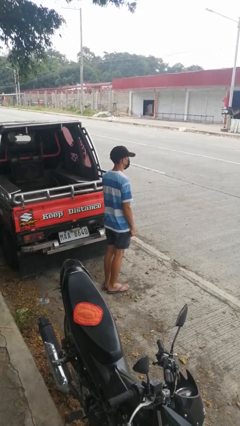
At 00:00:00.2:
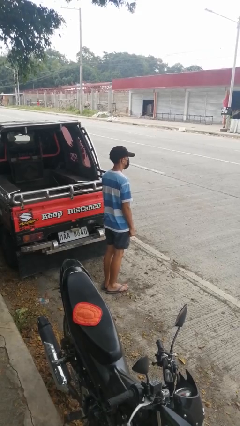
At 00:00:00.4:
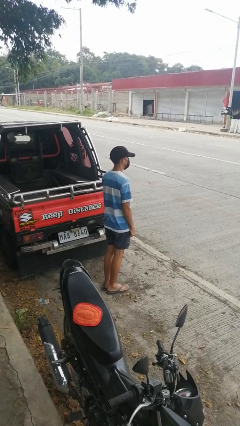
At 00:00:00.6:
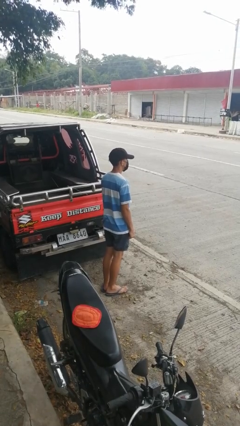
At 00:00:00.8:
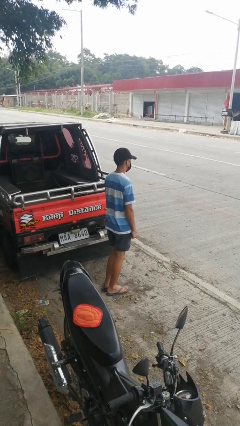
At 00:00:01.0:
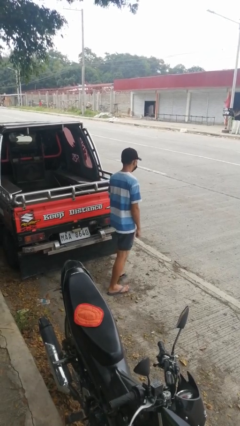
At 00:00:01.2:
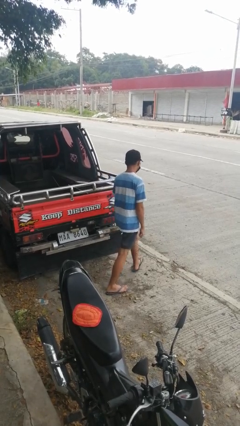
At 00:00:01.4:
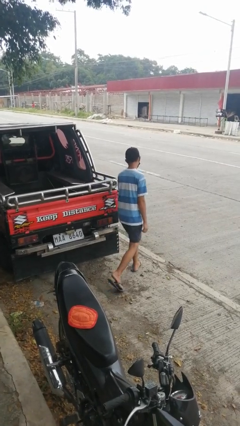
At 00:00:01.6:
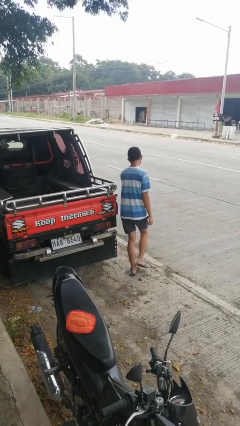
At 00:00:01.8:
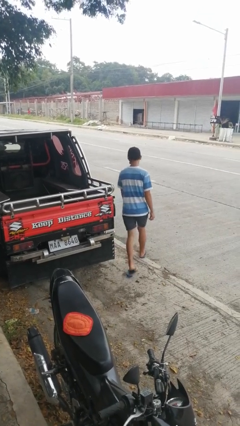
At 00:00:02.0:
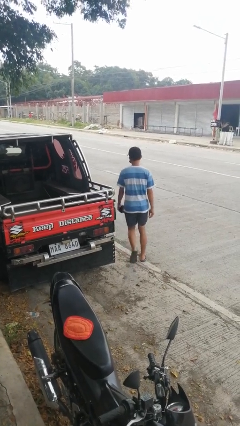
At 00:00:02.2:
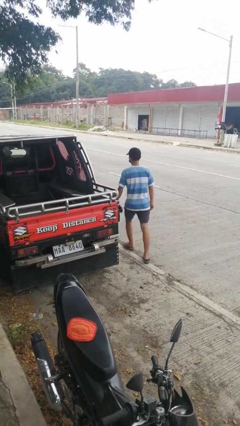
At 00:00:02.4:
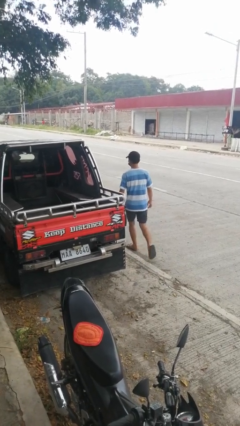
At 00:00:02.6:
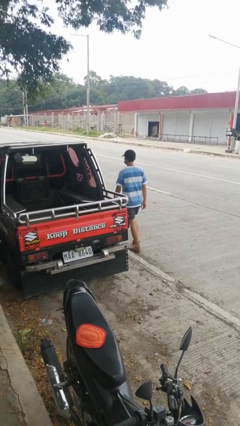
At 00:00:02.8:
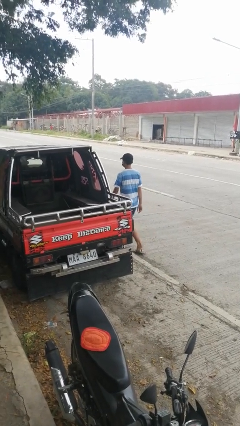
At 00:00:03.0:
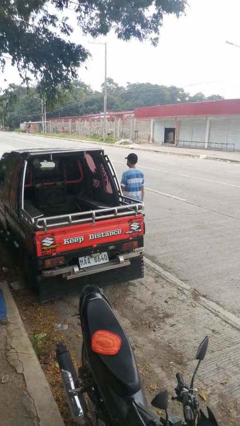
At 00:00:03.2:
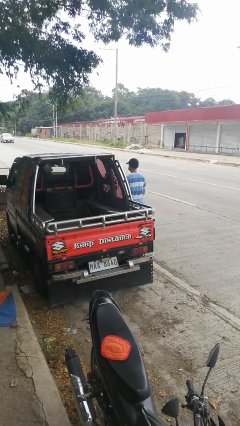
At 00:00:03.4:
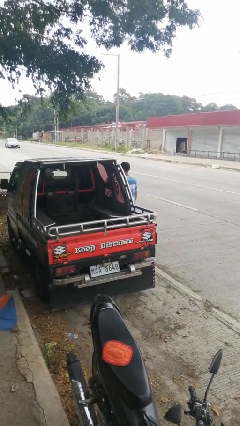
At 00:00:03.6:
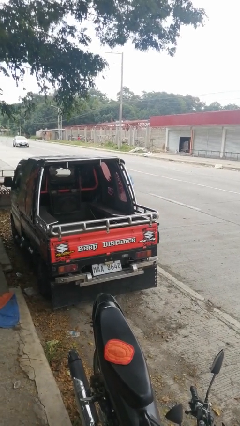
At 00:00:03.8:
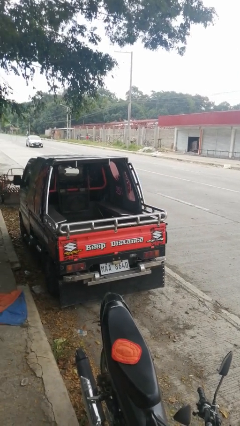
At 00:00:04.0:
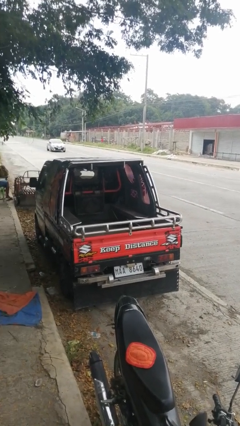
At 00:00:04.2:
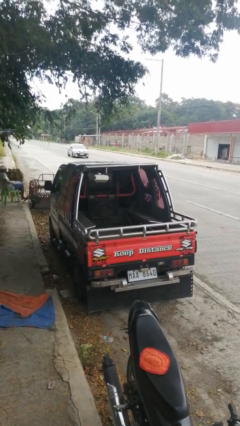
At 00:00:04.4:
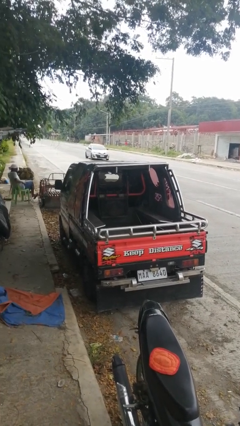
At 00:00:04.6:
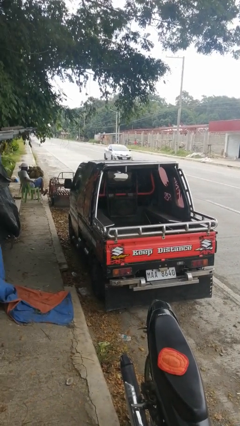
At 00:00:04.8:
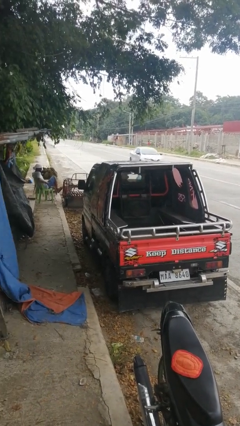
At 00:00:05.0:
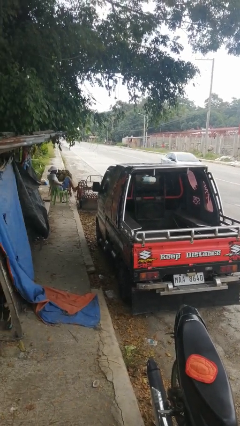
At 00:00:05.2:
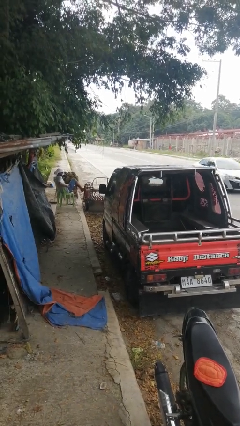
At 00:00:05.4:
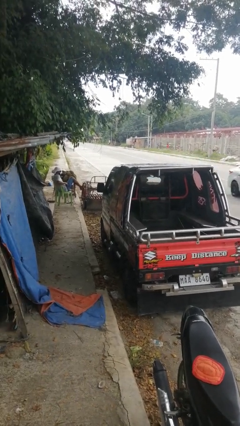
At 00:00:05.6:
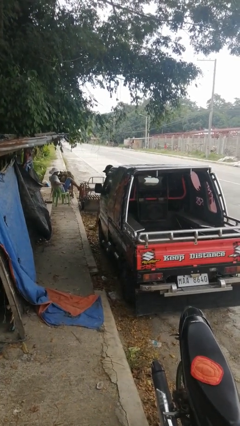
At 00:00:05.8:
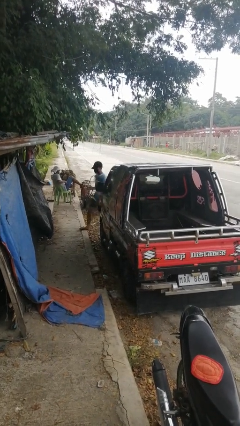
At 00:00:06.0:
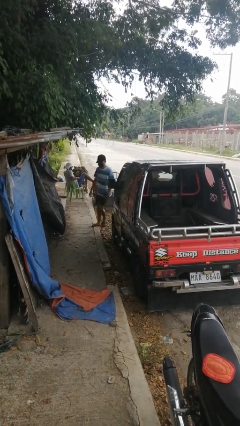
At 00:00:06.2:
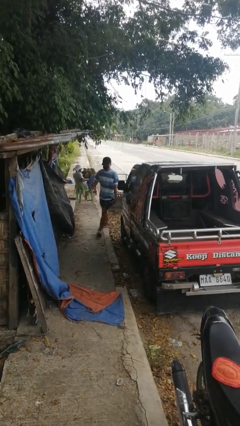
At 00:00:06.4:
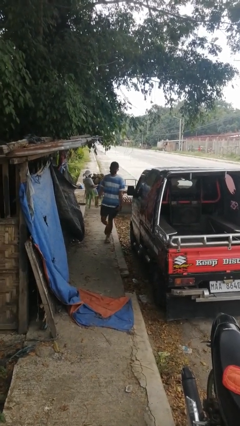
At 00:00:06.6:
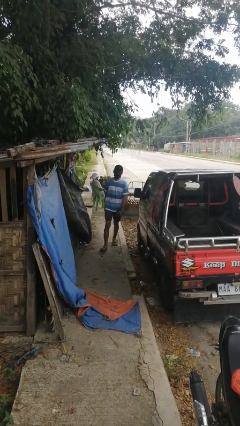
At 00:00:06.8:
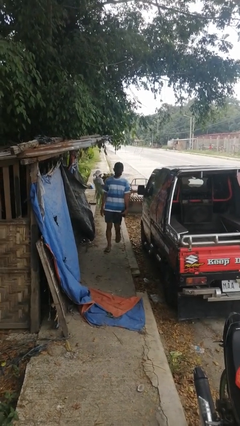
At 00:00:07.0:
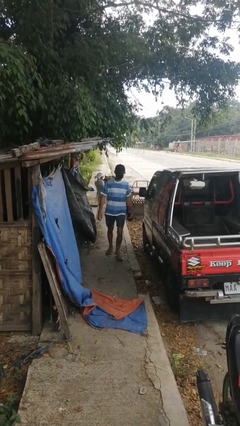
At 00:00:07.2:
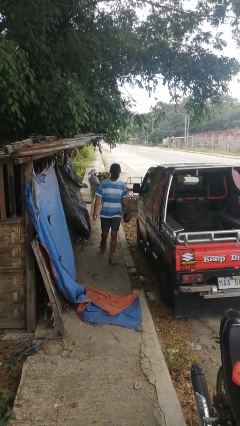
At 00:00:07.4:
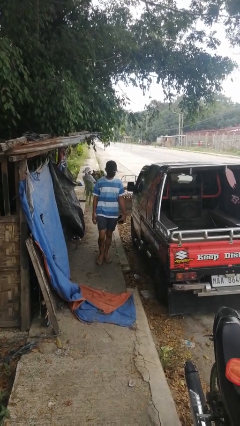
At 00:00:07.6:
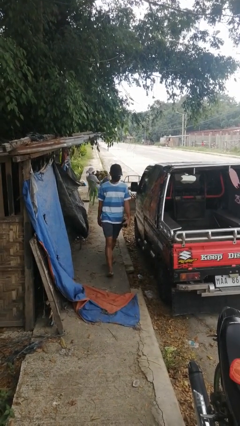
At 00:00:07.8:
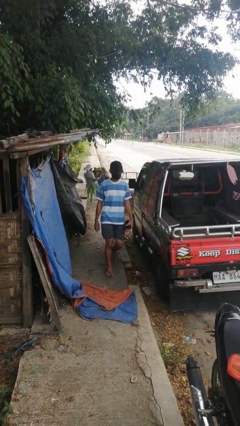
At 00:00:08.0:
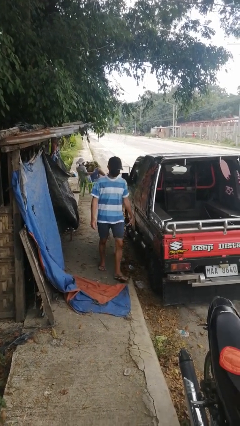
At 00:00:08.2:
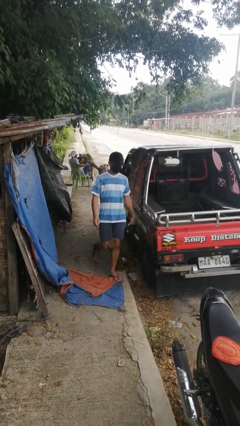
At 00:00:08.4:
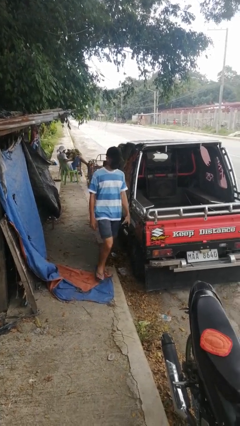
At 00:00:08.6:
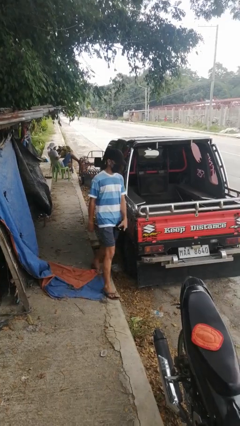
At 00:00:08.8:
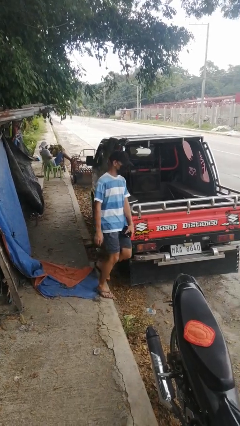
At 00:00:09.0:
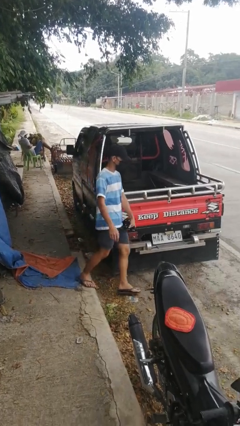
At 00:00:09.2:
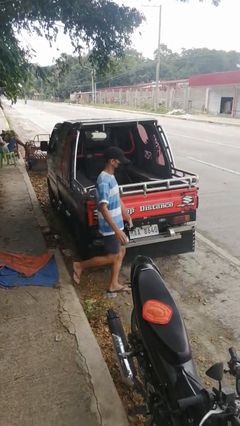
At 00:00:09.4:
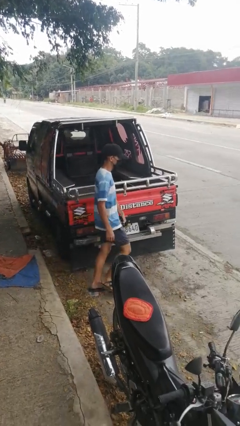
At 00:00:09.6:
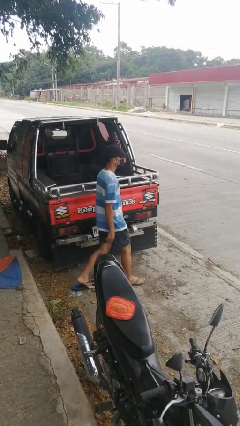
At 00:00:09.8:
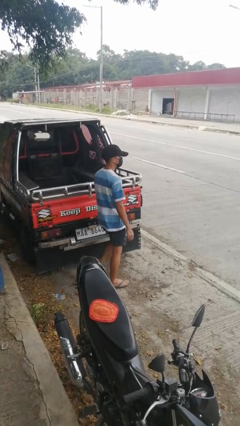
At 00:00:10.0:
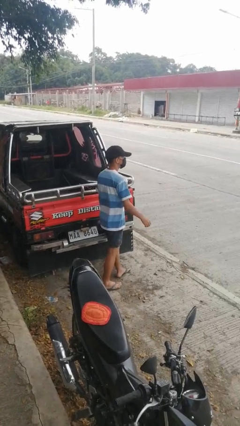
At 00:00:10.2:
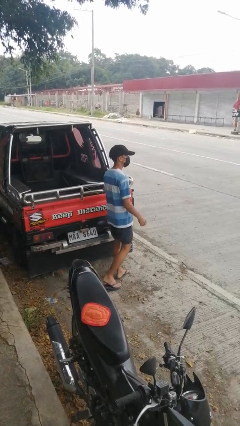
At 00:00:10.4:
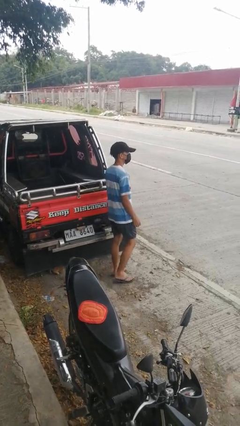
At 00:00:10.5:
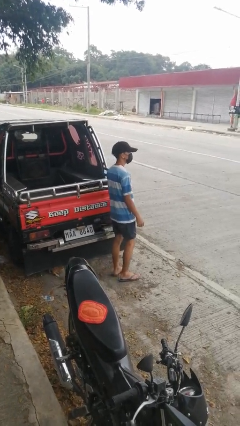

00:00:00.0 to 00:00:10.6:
person walks around car

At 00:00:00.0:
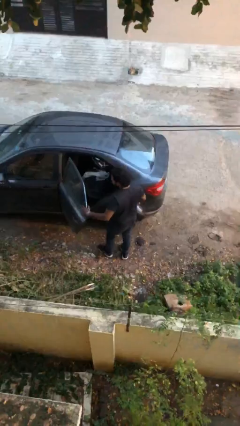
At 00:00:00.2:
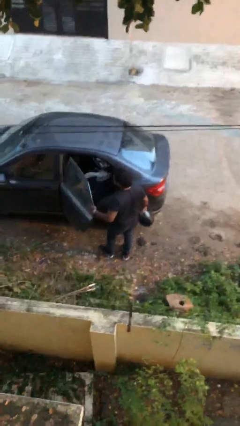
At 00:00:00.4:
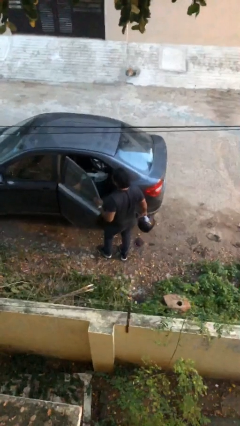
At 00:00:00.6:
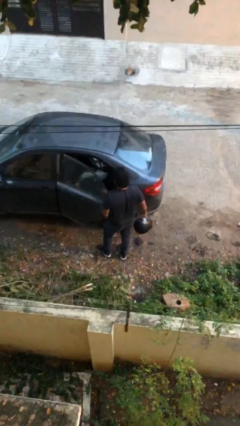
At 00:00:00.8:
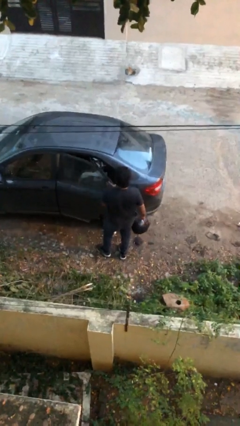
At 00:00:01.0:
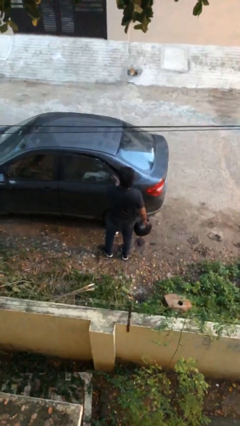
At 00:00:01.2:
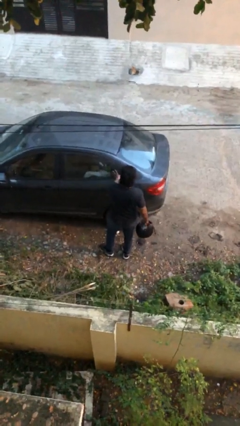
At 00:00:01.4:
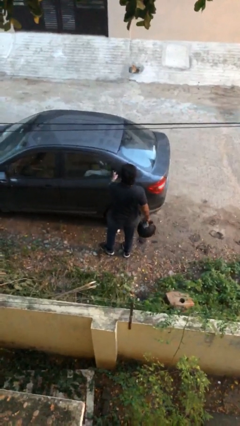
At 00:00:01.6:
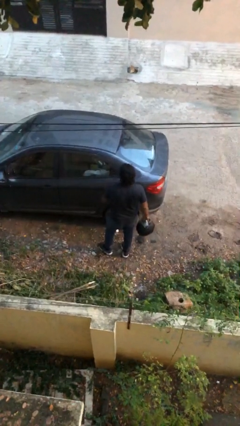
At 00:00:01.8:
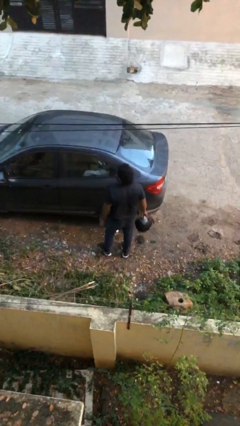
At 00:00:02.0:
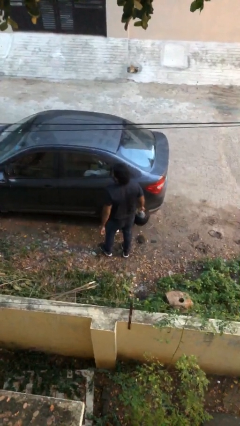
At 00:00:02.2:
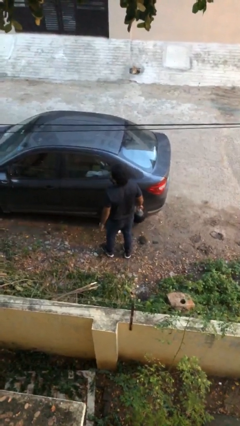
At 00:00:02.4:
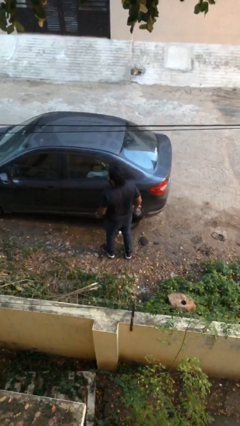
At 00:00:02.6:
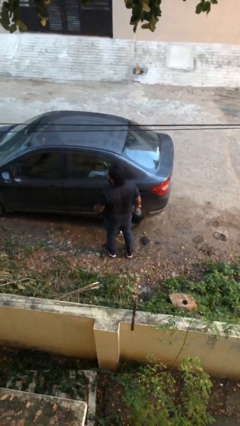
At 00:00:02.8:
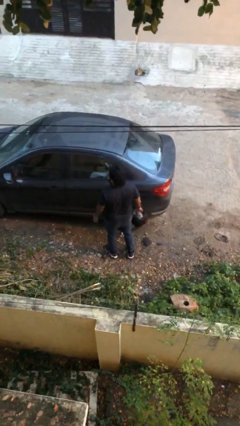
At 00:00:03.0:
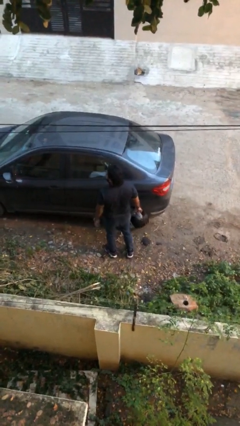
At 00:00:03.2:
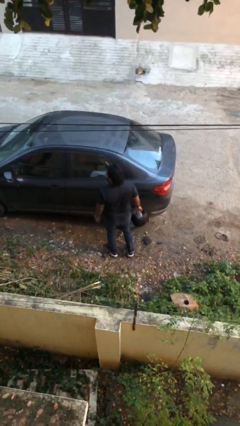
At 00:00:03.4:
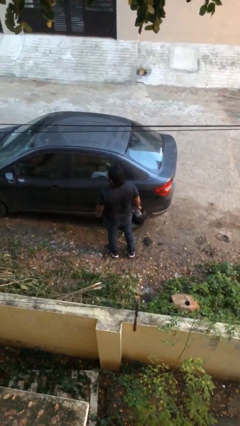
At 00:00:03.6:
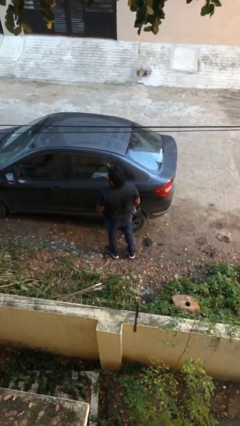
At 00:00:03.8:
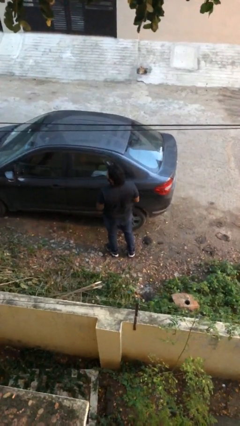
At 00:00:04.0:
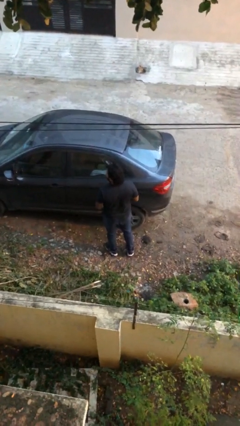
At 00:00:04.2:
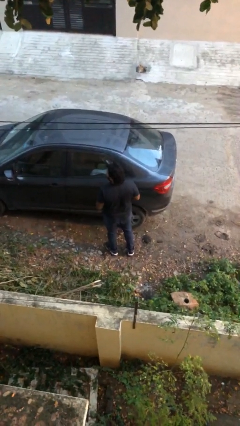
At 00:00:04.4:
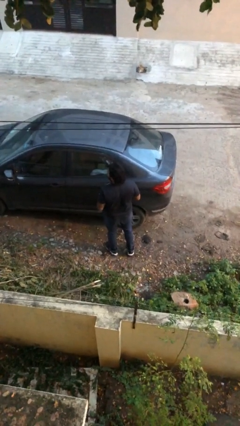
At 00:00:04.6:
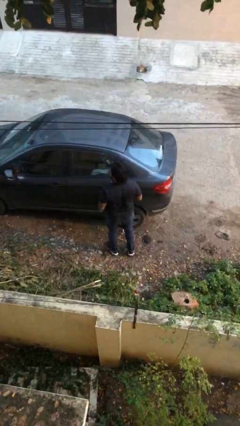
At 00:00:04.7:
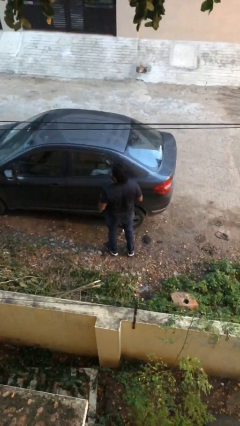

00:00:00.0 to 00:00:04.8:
person closes car door

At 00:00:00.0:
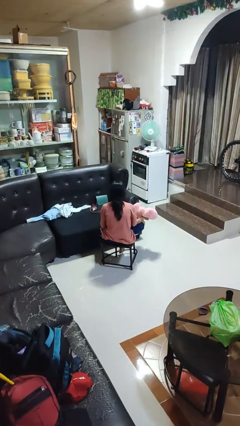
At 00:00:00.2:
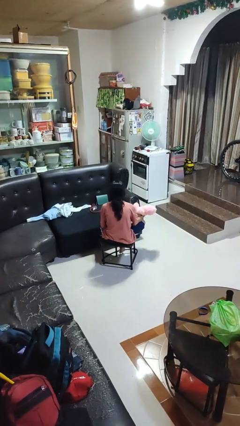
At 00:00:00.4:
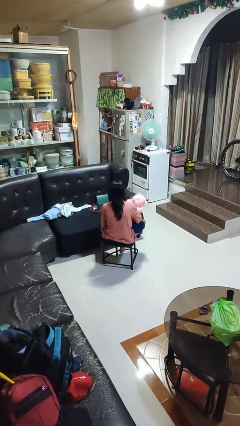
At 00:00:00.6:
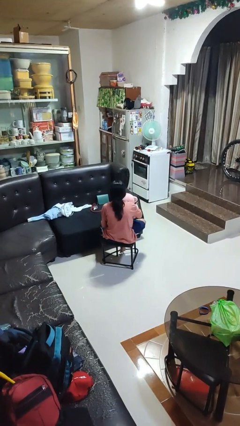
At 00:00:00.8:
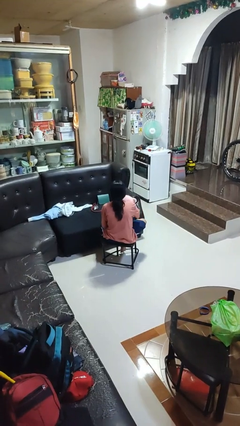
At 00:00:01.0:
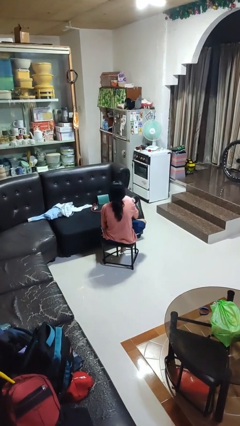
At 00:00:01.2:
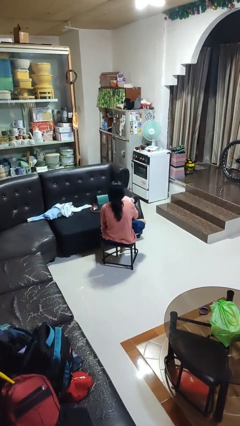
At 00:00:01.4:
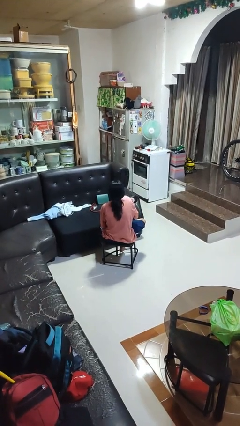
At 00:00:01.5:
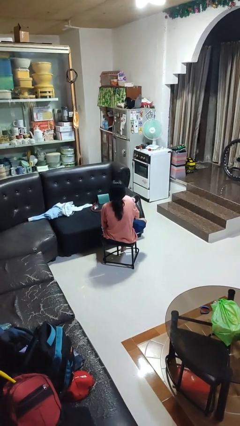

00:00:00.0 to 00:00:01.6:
person hugs stuffed animal

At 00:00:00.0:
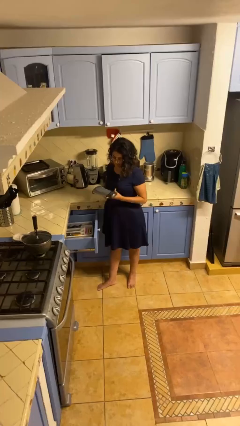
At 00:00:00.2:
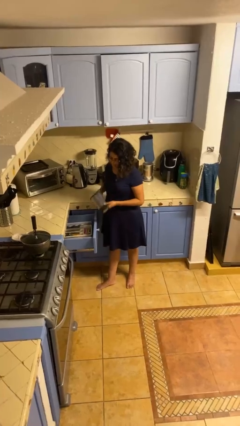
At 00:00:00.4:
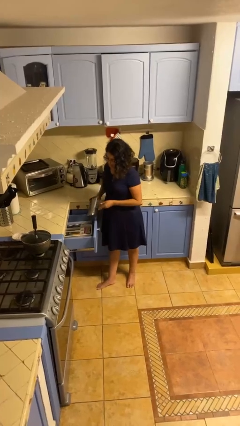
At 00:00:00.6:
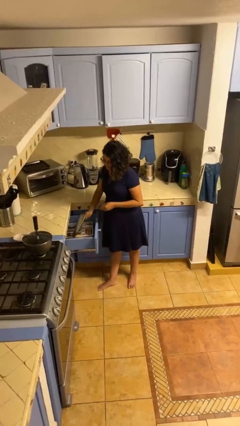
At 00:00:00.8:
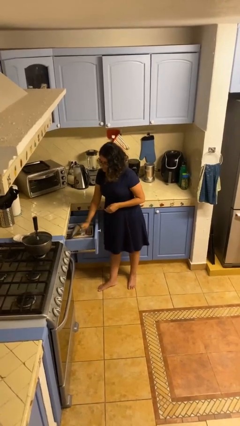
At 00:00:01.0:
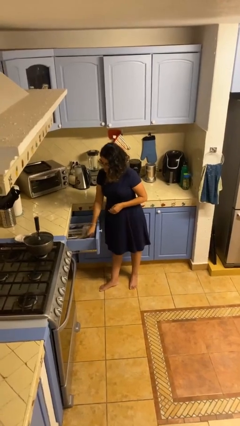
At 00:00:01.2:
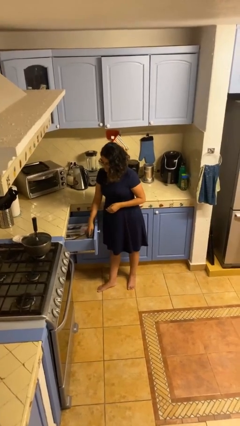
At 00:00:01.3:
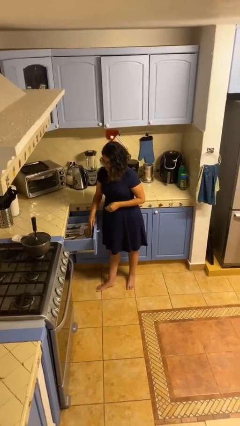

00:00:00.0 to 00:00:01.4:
person puts object into kitchen drawer
